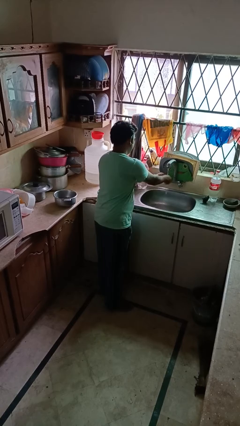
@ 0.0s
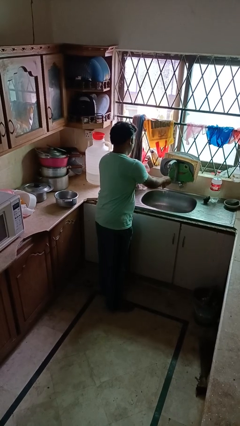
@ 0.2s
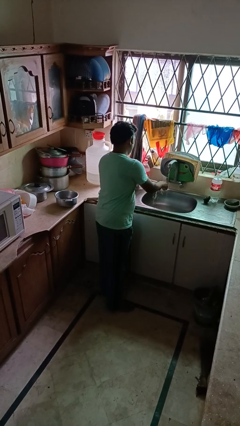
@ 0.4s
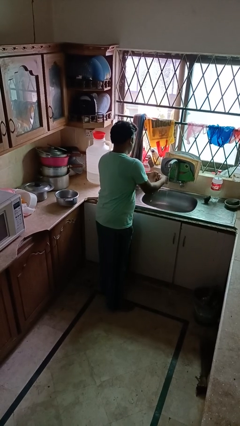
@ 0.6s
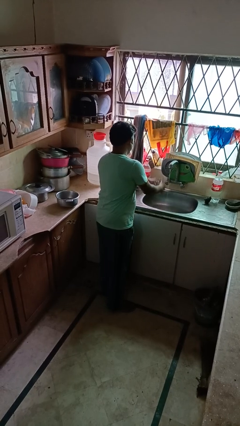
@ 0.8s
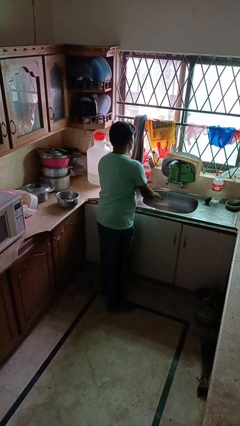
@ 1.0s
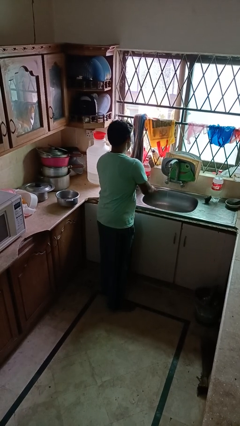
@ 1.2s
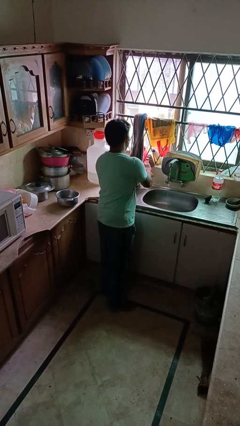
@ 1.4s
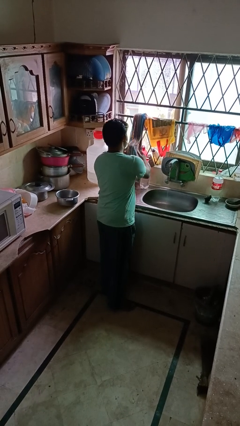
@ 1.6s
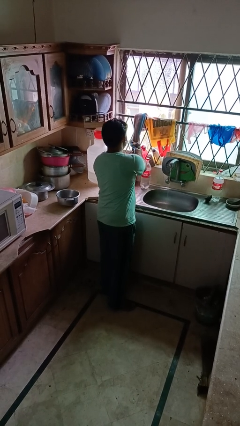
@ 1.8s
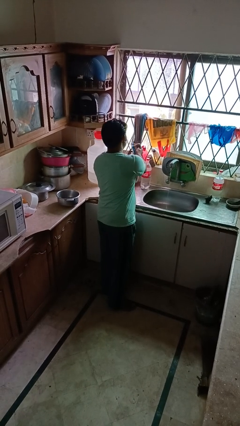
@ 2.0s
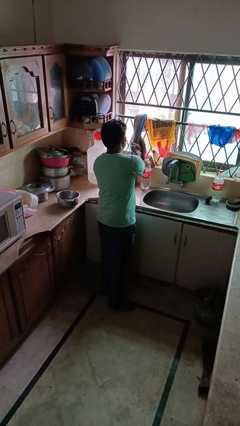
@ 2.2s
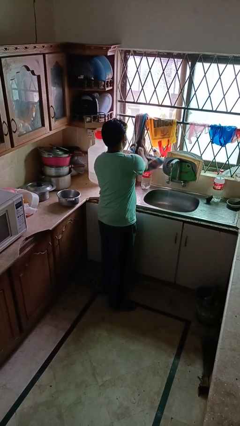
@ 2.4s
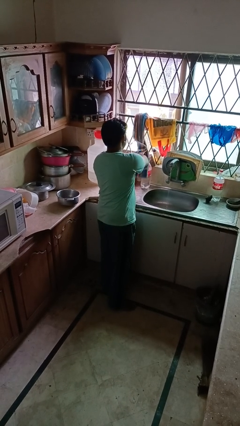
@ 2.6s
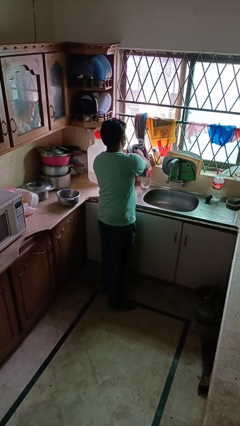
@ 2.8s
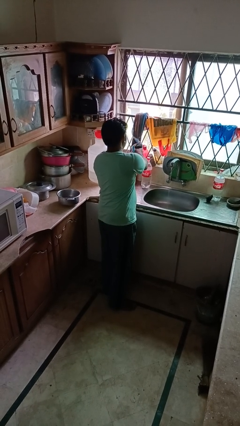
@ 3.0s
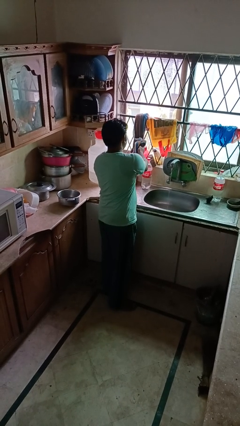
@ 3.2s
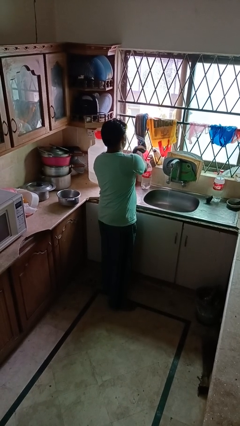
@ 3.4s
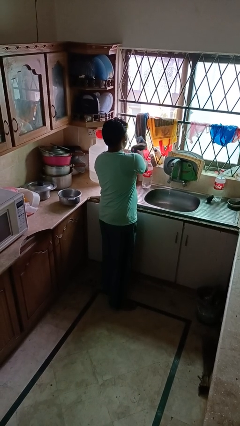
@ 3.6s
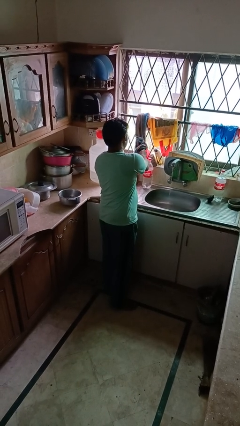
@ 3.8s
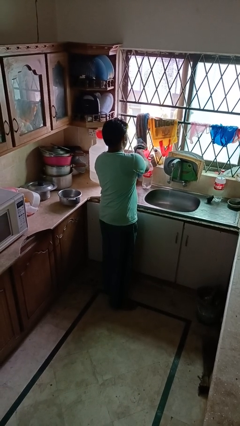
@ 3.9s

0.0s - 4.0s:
person dries hands with towel

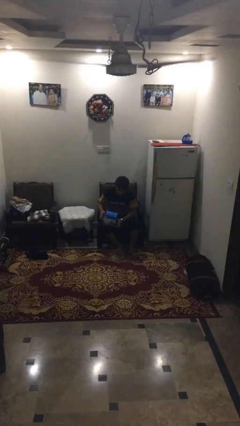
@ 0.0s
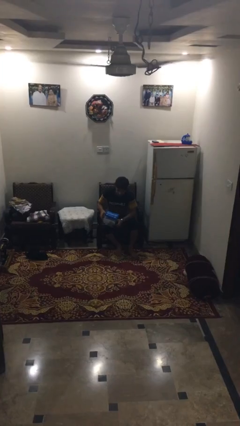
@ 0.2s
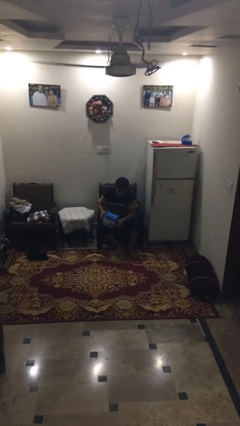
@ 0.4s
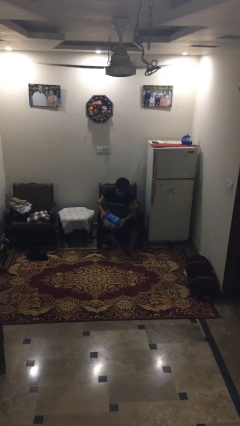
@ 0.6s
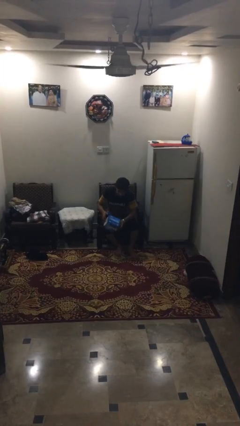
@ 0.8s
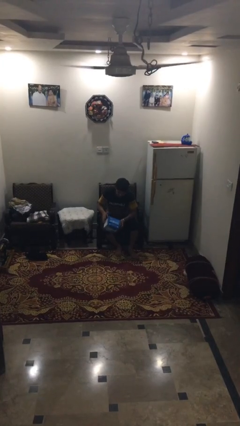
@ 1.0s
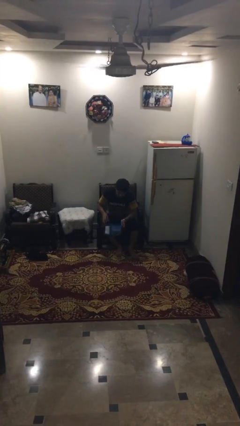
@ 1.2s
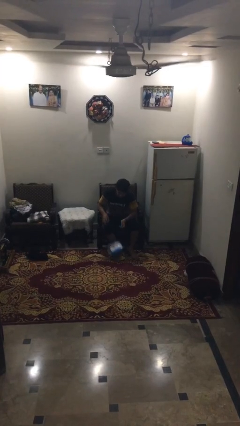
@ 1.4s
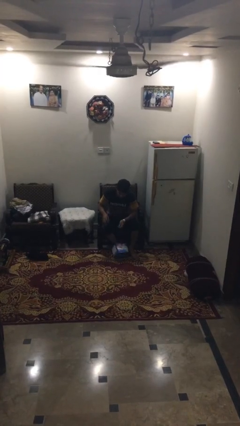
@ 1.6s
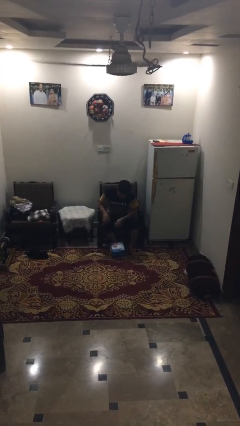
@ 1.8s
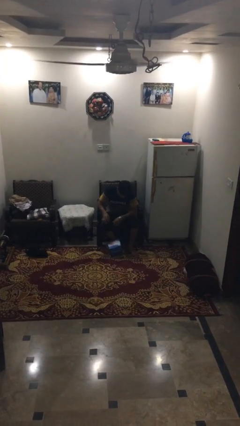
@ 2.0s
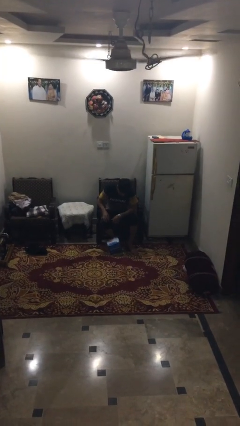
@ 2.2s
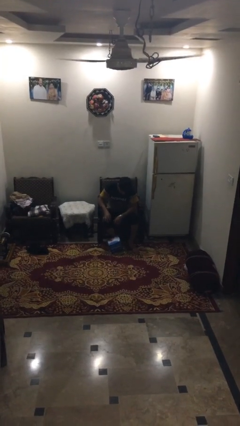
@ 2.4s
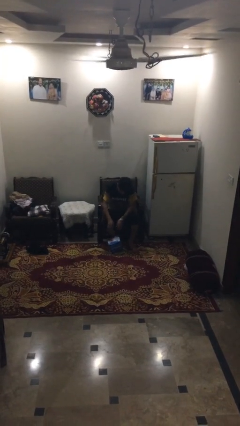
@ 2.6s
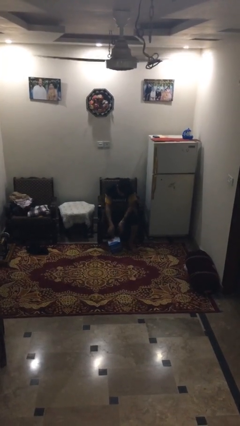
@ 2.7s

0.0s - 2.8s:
person drops object

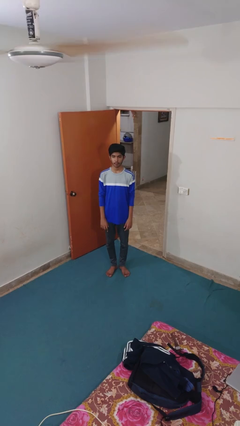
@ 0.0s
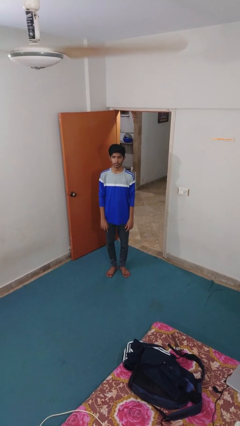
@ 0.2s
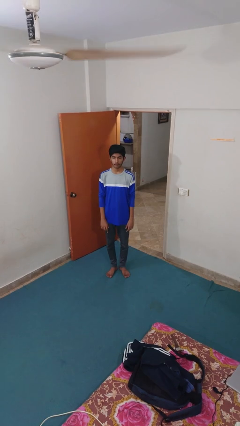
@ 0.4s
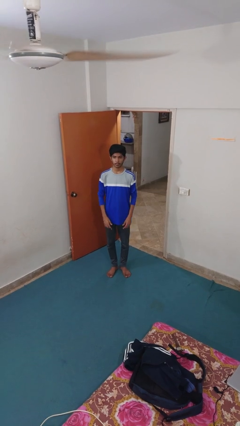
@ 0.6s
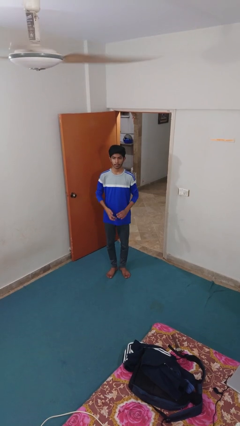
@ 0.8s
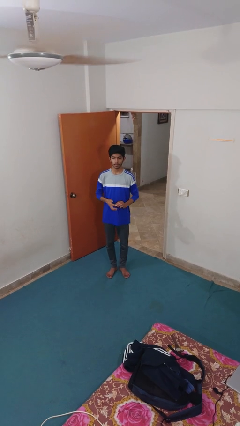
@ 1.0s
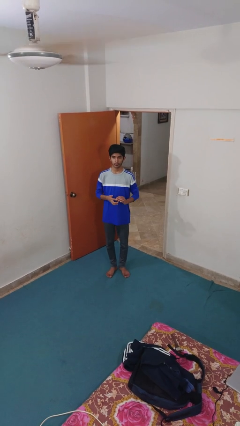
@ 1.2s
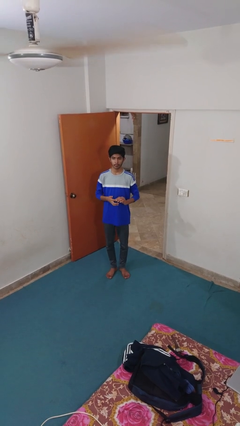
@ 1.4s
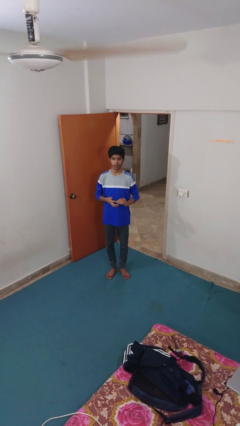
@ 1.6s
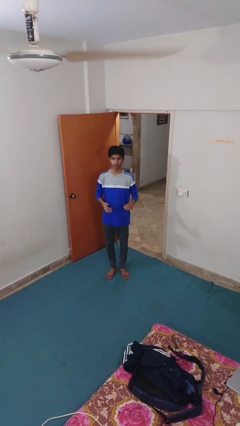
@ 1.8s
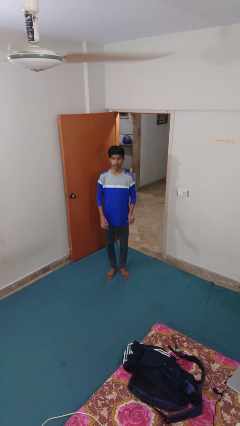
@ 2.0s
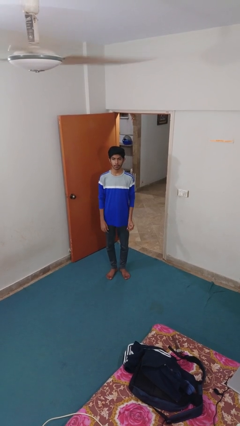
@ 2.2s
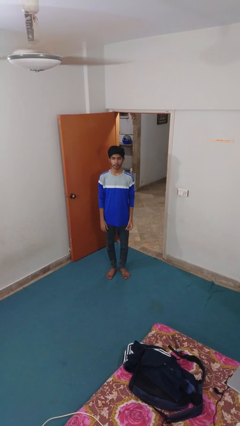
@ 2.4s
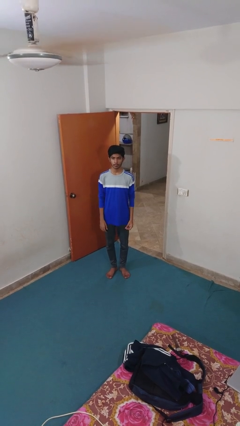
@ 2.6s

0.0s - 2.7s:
person takes off ring

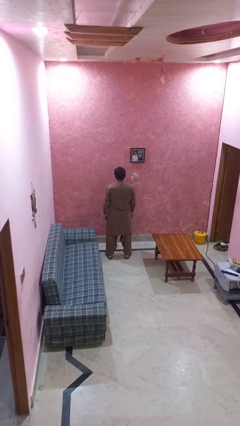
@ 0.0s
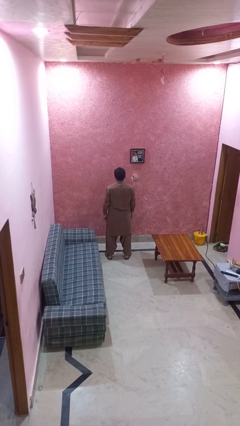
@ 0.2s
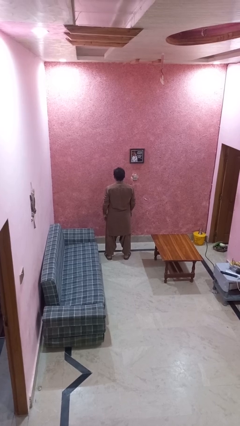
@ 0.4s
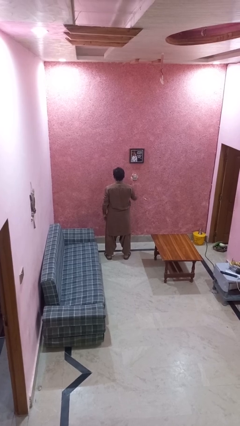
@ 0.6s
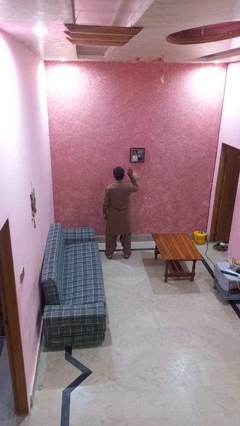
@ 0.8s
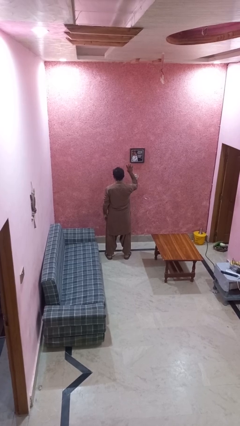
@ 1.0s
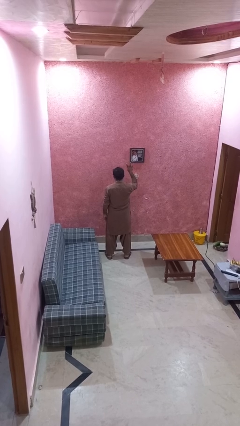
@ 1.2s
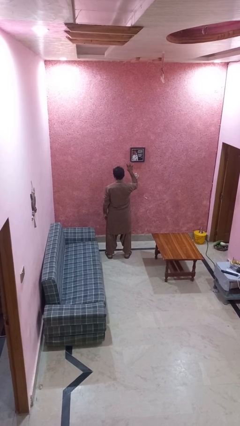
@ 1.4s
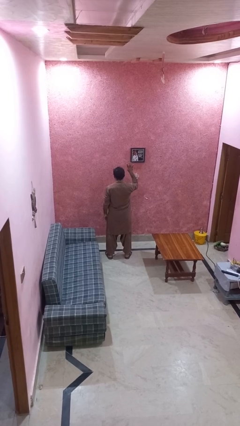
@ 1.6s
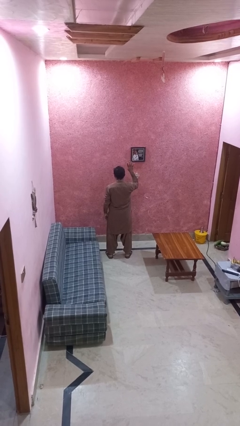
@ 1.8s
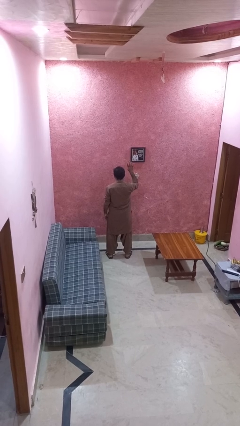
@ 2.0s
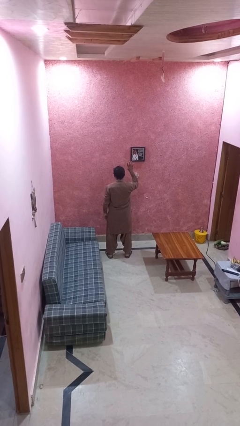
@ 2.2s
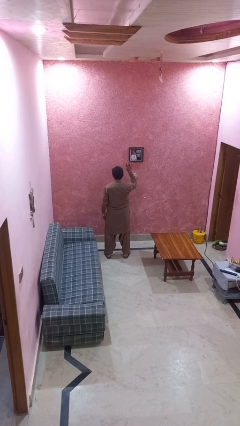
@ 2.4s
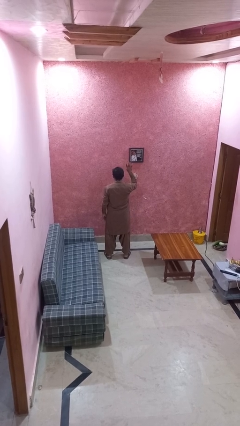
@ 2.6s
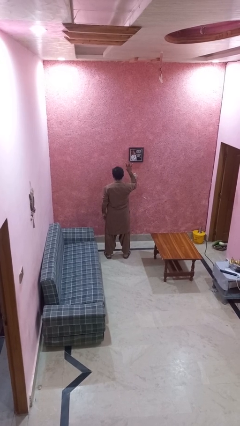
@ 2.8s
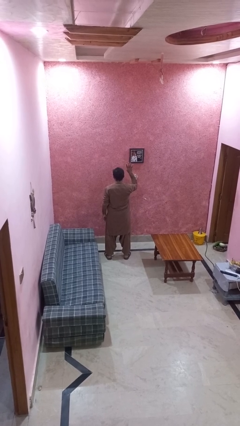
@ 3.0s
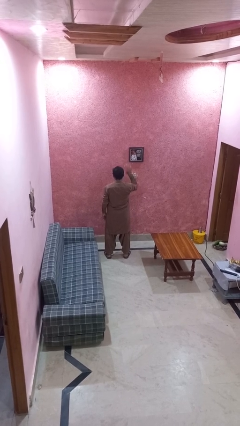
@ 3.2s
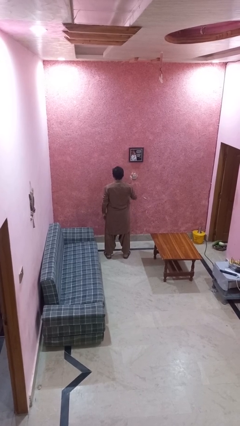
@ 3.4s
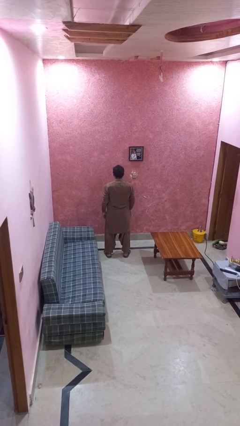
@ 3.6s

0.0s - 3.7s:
person gestures number four

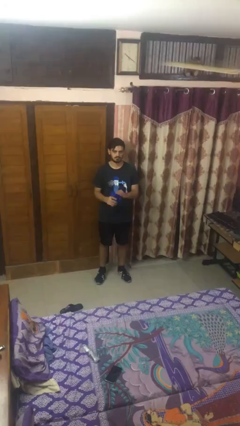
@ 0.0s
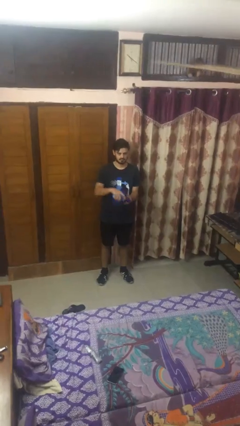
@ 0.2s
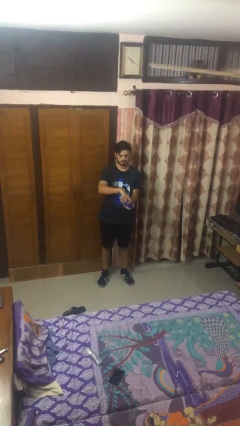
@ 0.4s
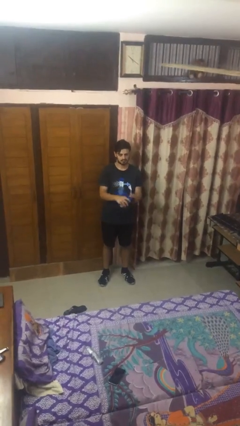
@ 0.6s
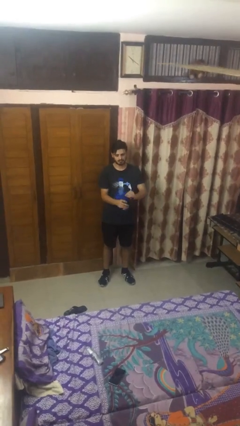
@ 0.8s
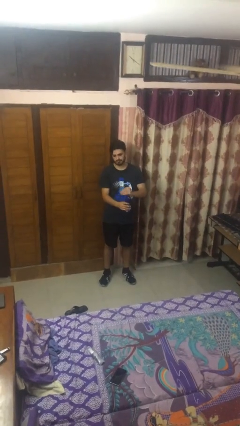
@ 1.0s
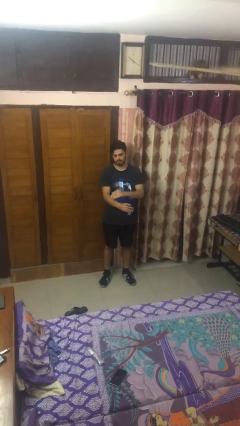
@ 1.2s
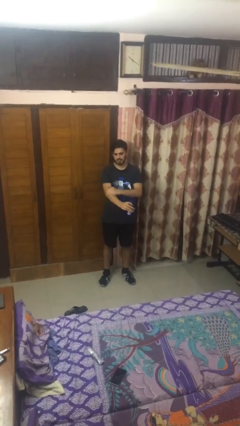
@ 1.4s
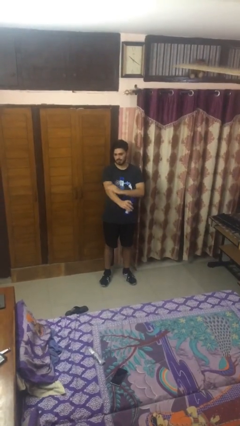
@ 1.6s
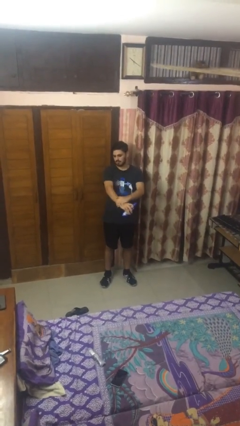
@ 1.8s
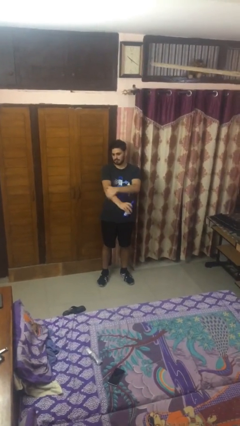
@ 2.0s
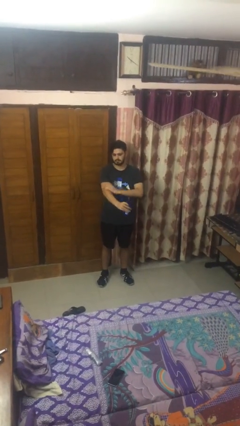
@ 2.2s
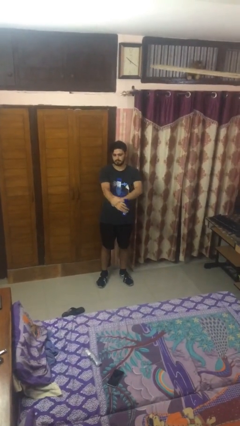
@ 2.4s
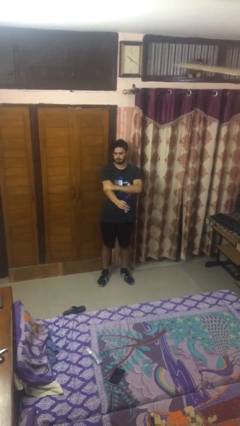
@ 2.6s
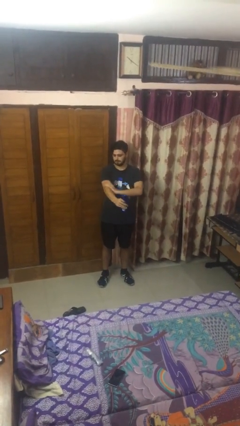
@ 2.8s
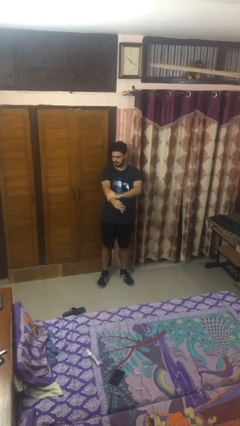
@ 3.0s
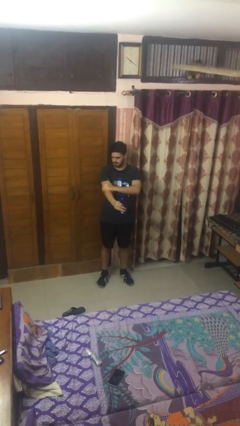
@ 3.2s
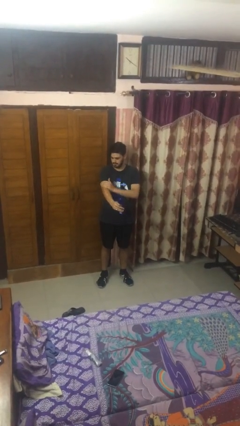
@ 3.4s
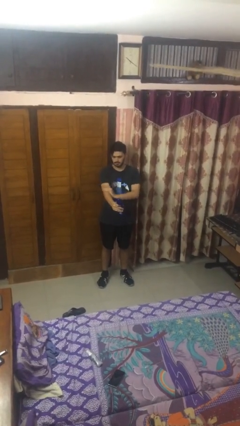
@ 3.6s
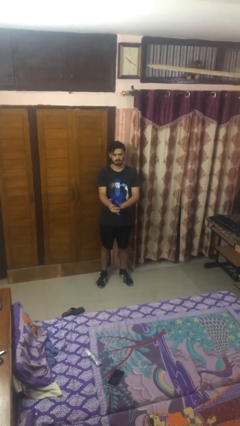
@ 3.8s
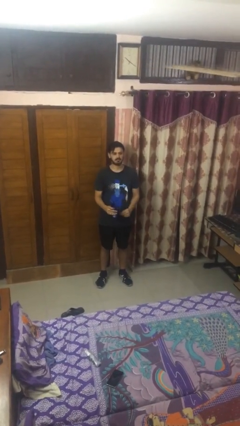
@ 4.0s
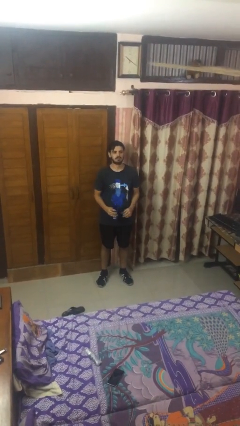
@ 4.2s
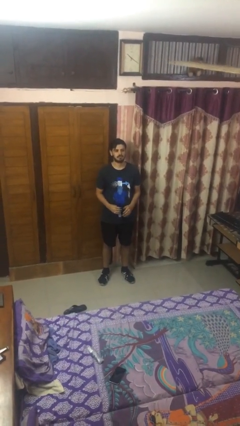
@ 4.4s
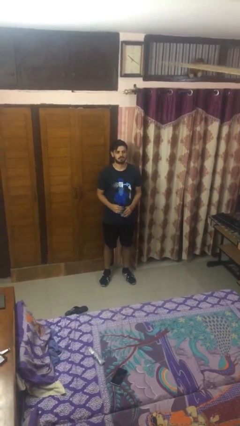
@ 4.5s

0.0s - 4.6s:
person applies sunscreen

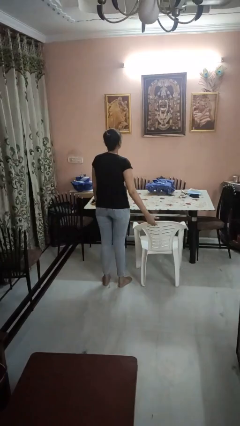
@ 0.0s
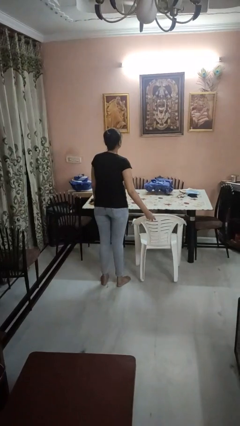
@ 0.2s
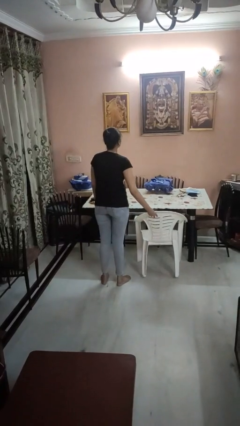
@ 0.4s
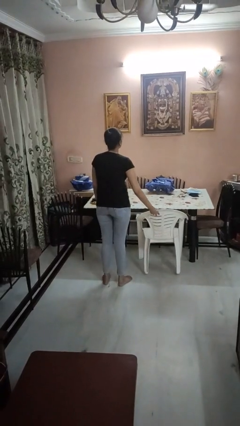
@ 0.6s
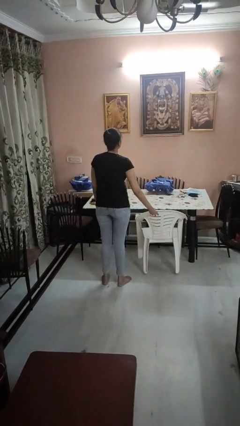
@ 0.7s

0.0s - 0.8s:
person pushes in chair
